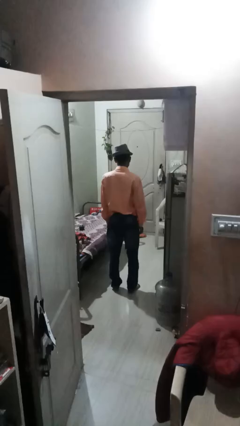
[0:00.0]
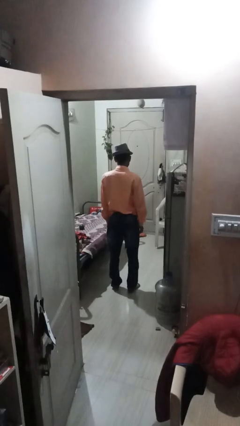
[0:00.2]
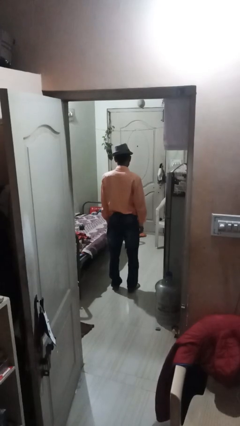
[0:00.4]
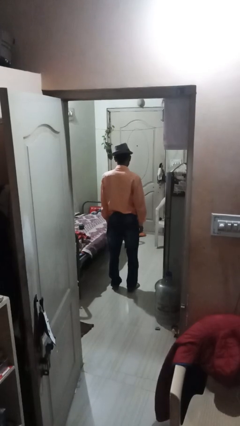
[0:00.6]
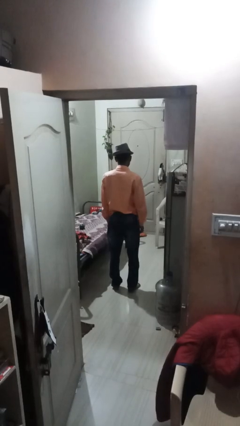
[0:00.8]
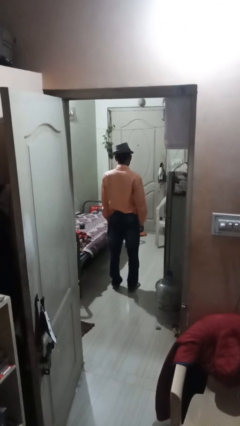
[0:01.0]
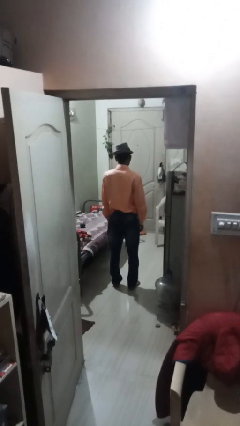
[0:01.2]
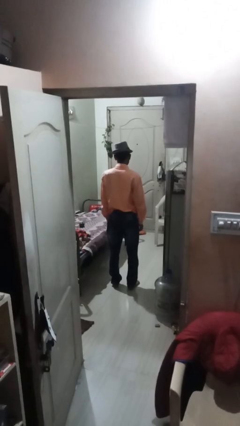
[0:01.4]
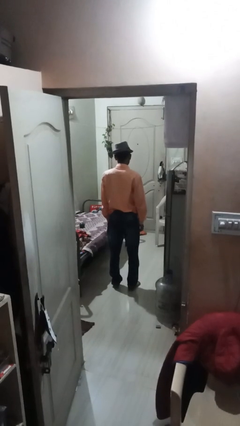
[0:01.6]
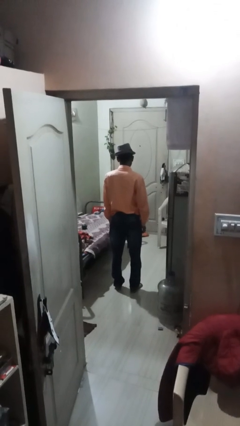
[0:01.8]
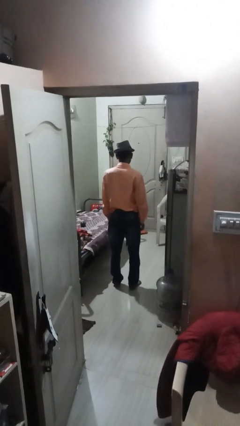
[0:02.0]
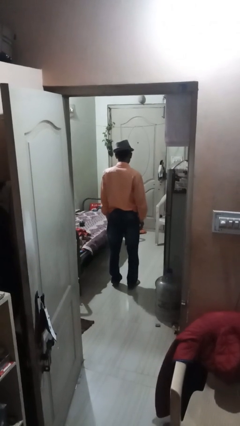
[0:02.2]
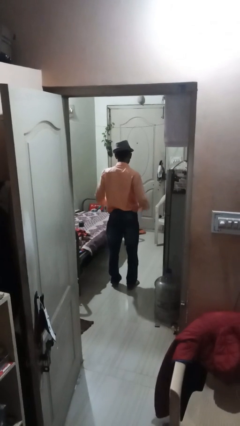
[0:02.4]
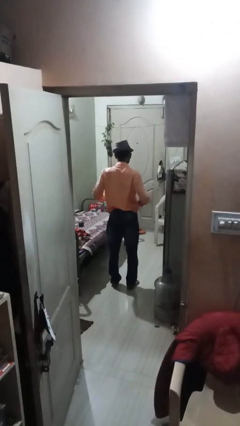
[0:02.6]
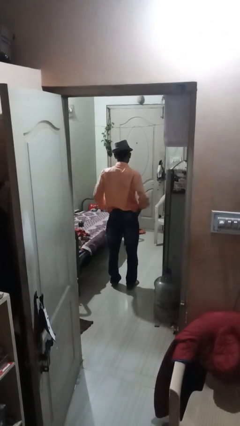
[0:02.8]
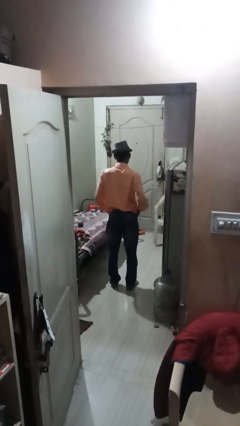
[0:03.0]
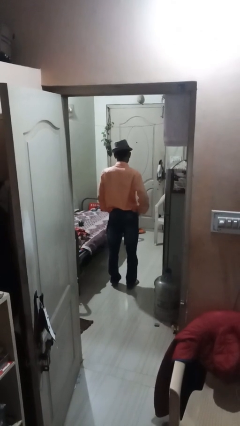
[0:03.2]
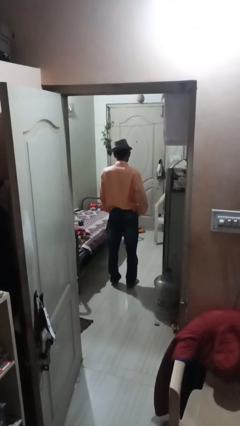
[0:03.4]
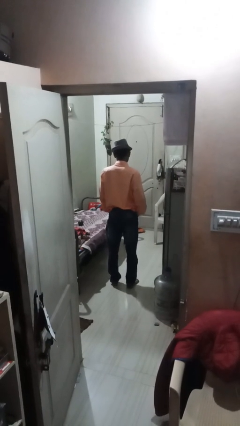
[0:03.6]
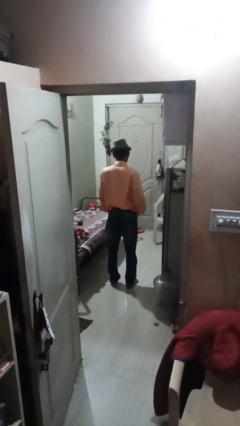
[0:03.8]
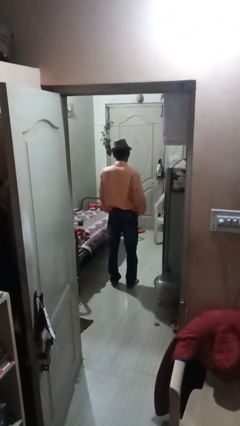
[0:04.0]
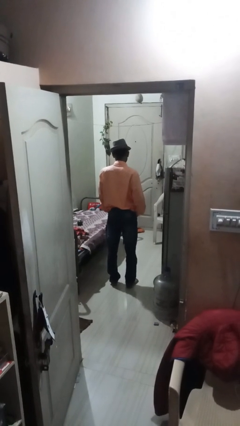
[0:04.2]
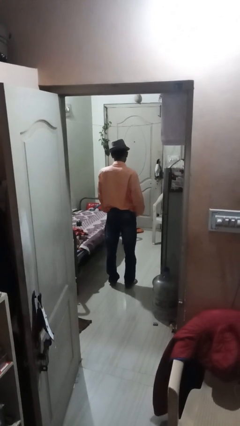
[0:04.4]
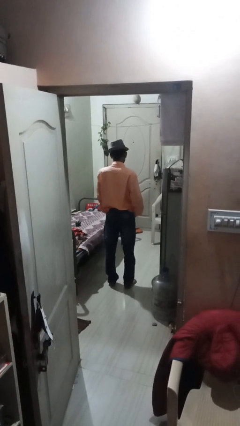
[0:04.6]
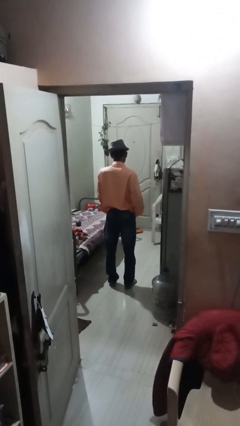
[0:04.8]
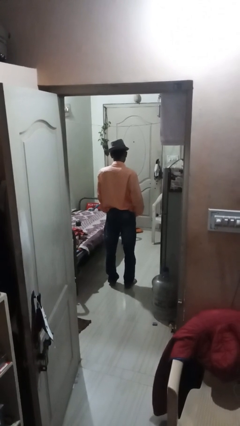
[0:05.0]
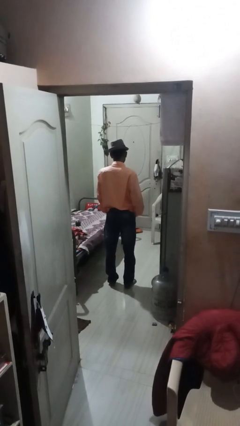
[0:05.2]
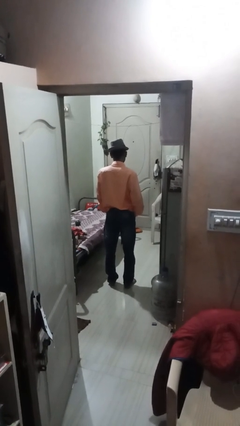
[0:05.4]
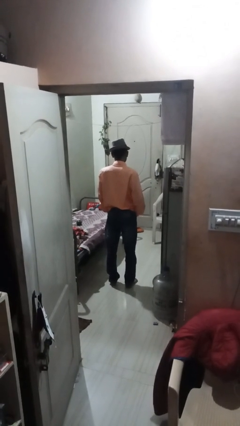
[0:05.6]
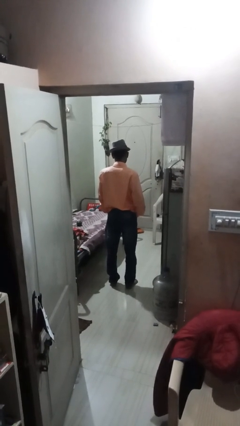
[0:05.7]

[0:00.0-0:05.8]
person puts hands in back pockets

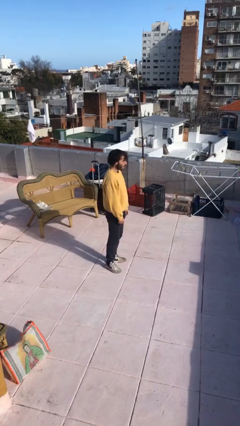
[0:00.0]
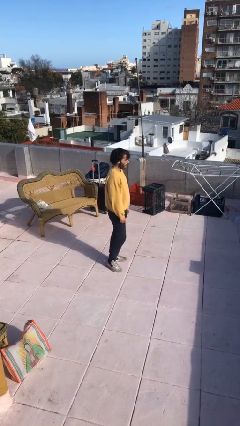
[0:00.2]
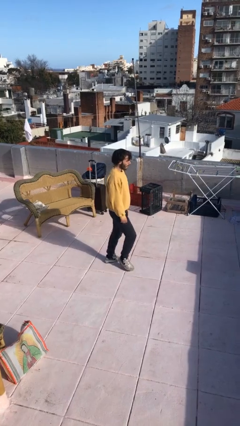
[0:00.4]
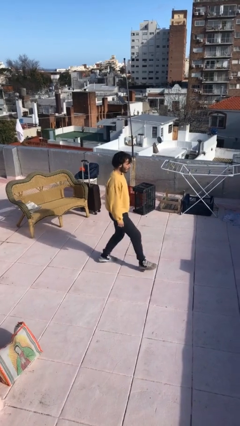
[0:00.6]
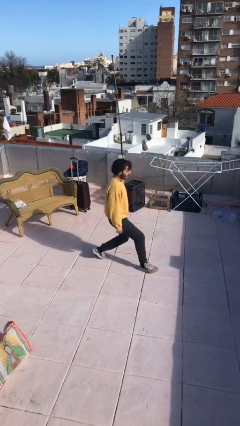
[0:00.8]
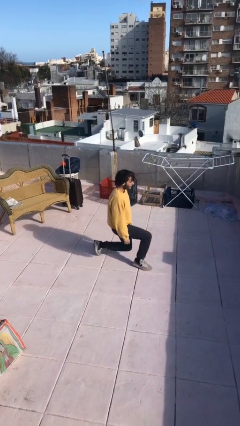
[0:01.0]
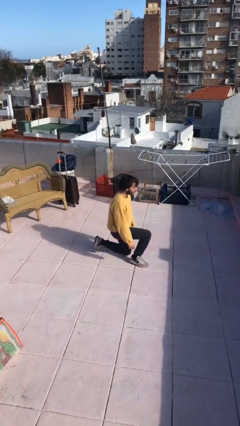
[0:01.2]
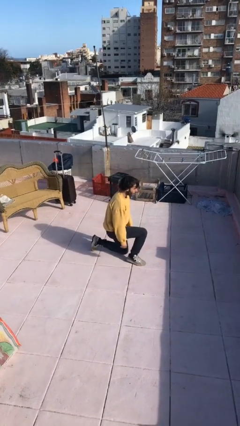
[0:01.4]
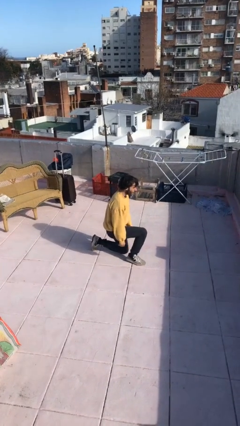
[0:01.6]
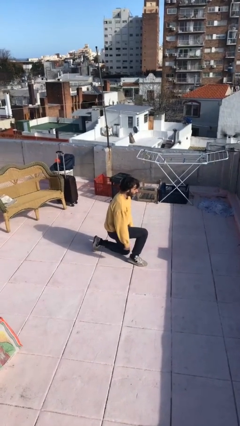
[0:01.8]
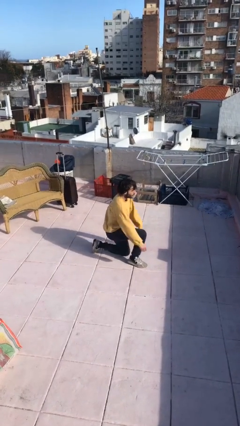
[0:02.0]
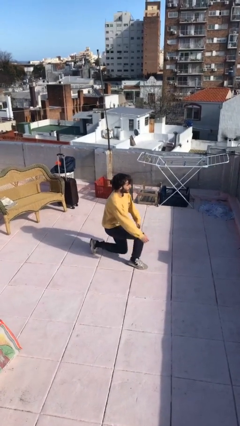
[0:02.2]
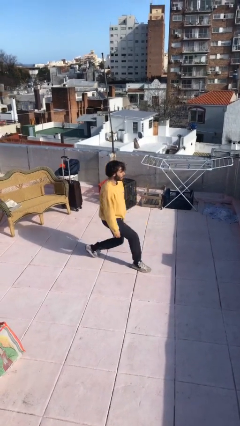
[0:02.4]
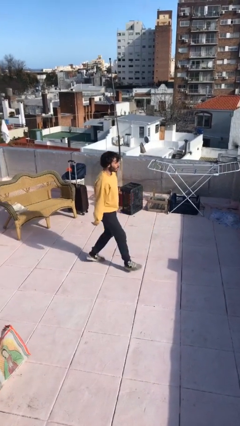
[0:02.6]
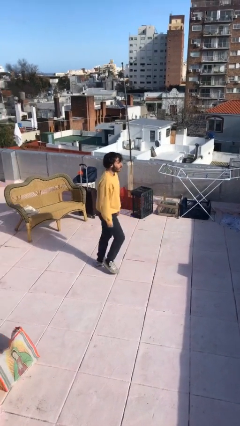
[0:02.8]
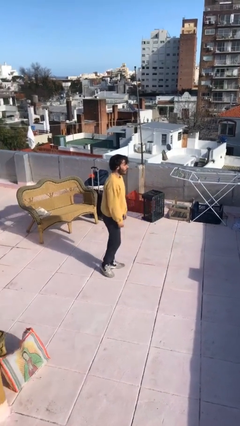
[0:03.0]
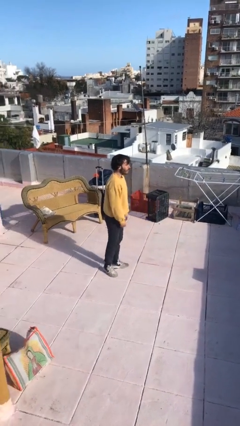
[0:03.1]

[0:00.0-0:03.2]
person exercises with lunges

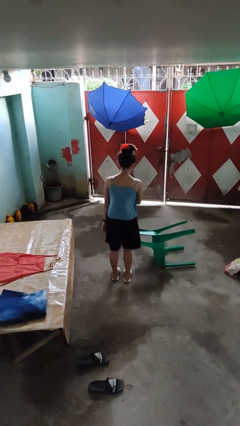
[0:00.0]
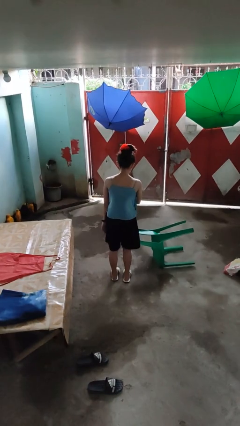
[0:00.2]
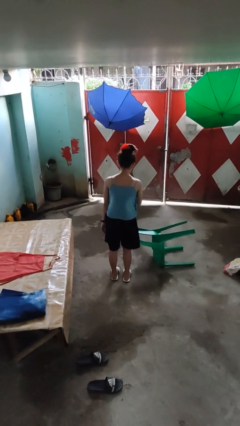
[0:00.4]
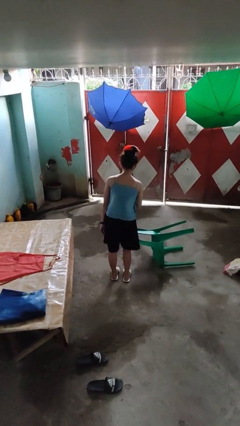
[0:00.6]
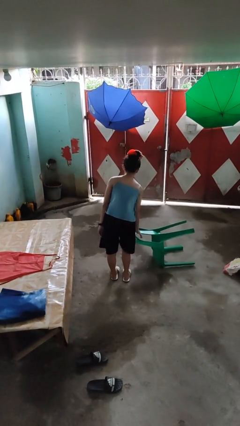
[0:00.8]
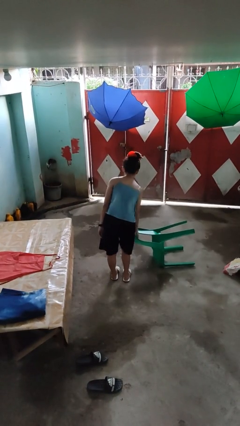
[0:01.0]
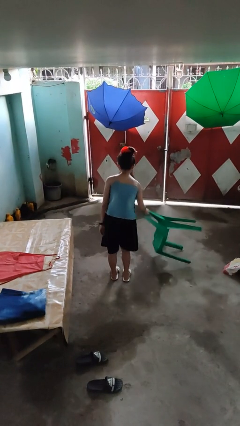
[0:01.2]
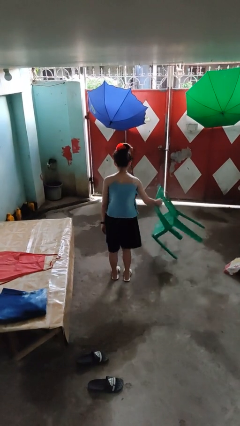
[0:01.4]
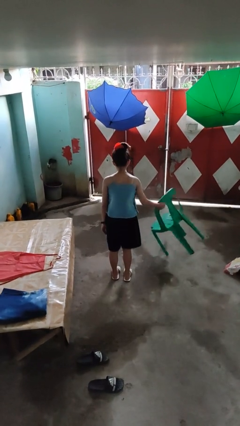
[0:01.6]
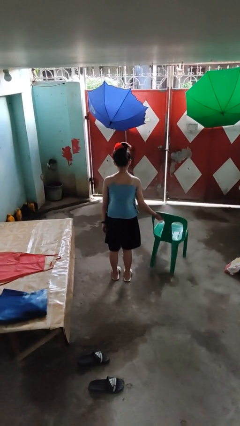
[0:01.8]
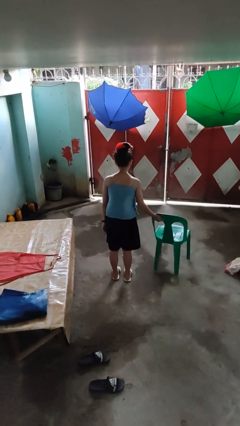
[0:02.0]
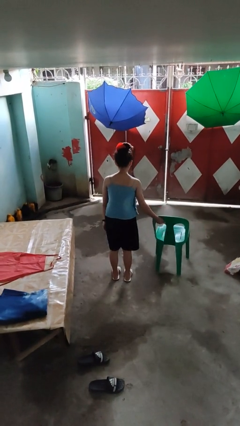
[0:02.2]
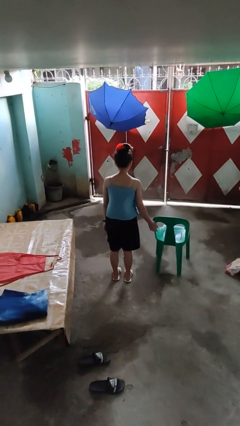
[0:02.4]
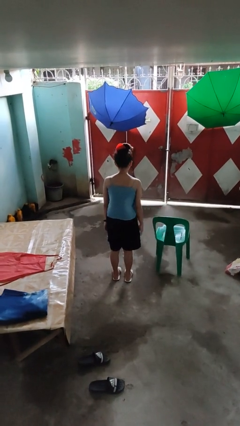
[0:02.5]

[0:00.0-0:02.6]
person sets upright furniture

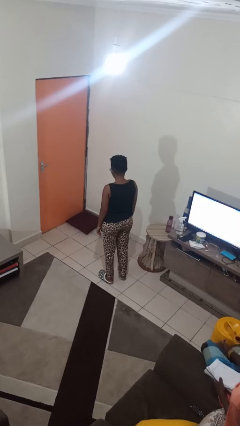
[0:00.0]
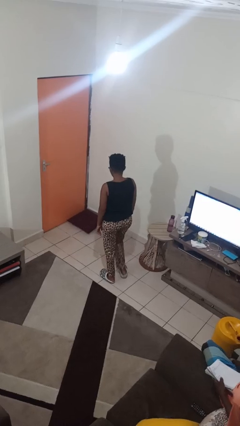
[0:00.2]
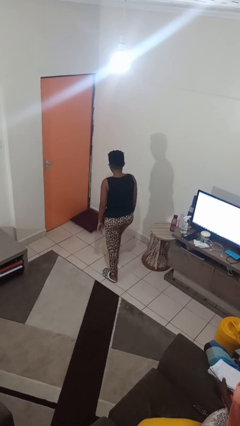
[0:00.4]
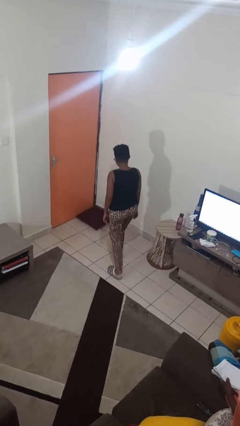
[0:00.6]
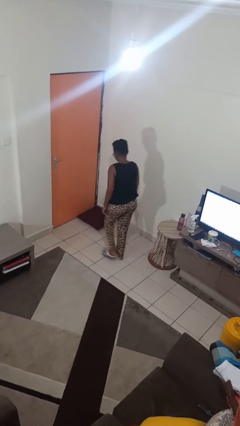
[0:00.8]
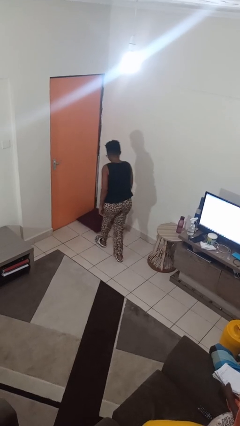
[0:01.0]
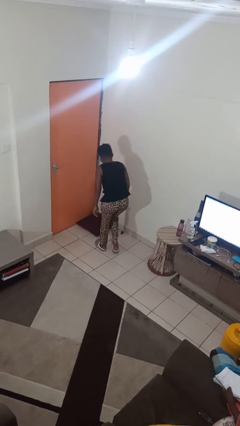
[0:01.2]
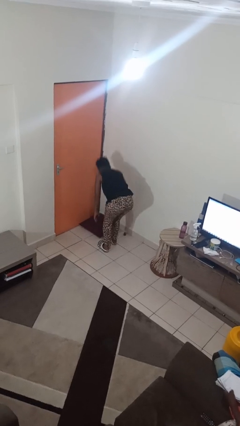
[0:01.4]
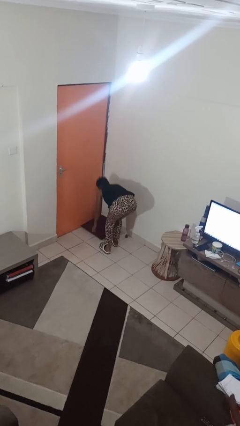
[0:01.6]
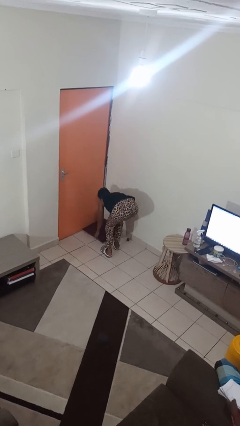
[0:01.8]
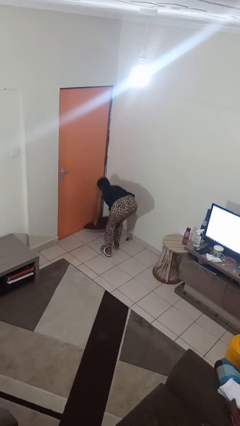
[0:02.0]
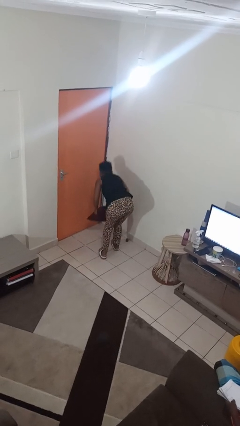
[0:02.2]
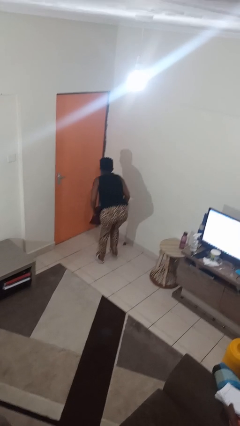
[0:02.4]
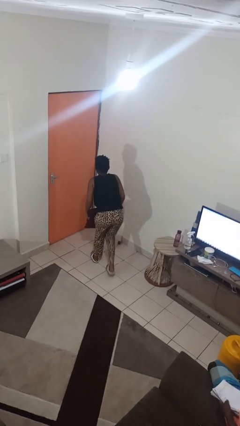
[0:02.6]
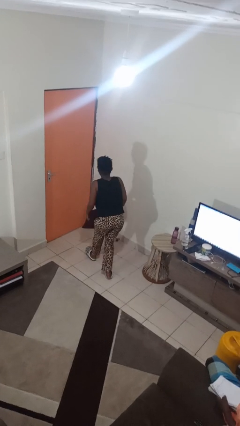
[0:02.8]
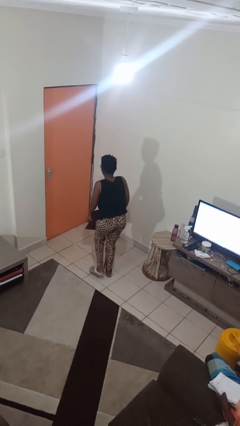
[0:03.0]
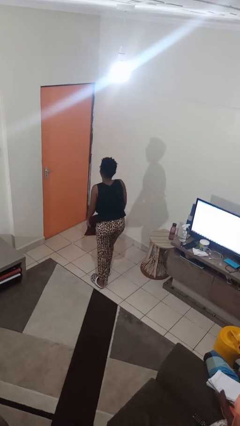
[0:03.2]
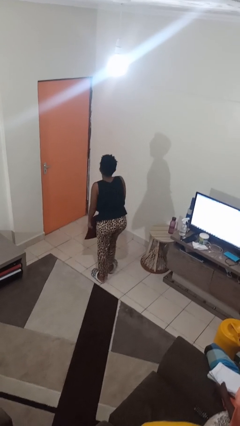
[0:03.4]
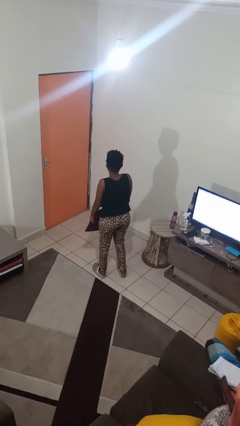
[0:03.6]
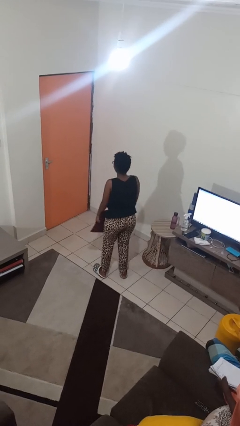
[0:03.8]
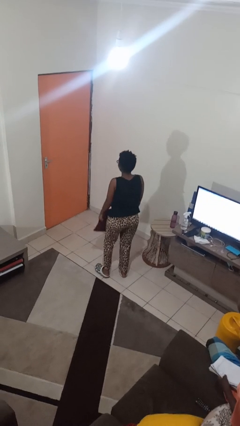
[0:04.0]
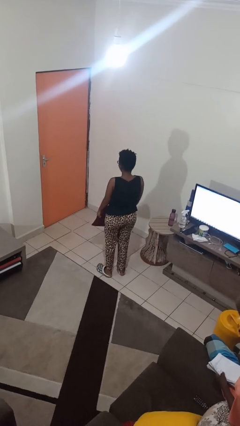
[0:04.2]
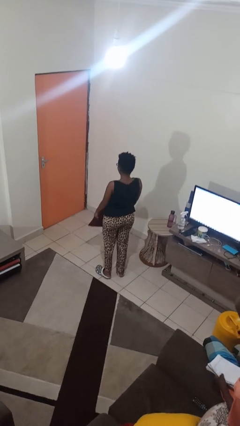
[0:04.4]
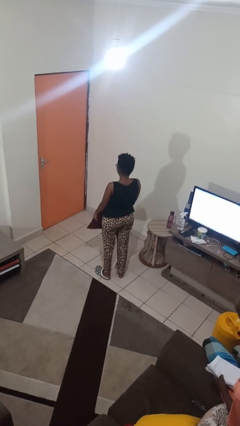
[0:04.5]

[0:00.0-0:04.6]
person picks up object from floor

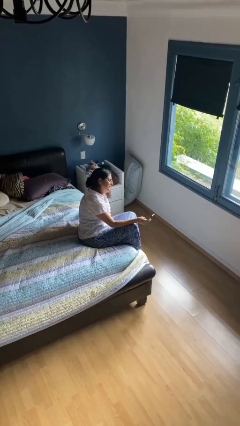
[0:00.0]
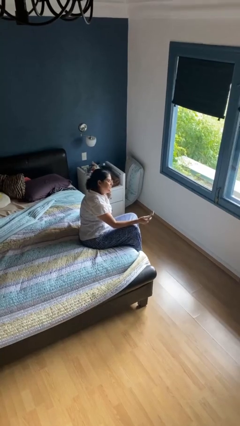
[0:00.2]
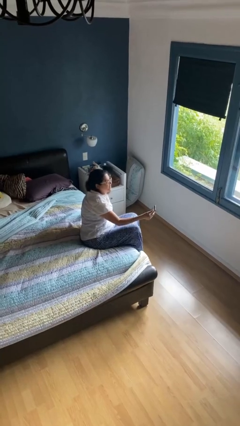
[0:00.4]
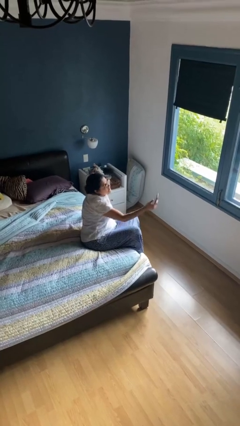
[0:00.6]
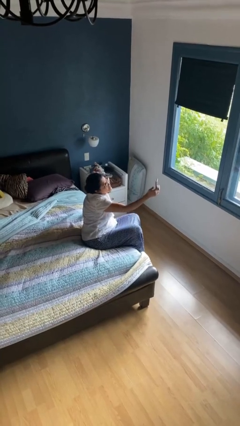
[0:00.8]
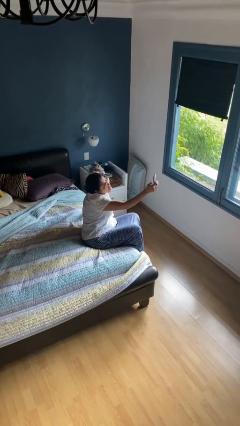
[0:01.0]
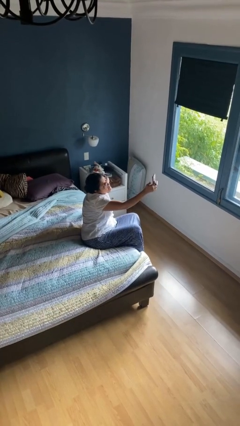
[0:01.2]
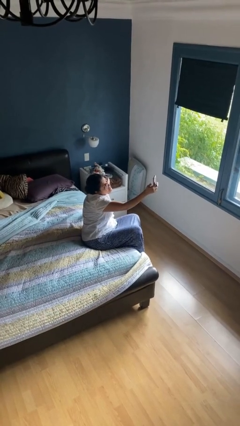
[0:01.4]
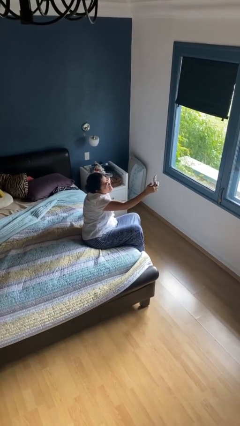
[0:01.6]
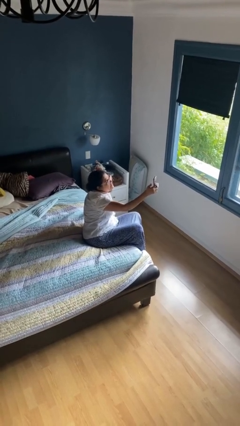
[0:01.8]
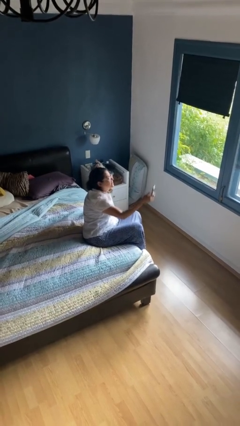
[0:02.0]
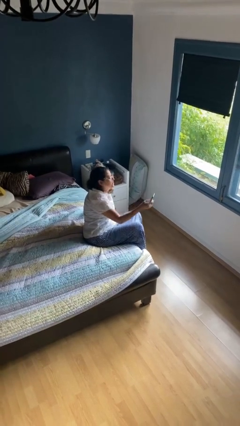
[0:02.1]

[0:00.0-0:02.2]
person takes selfie
